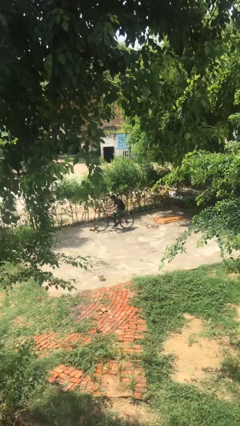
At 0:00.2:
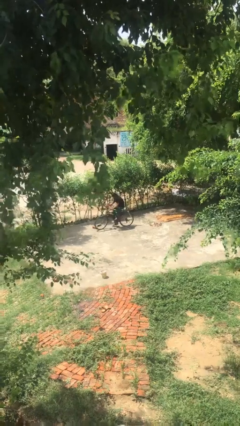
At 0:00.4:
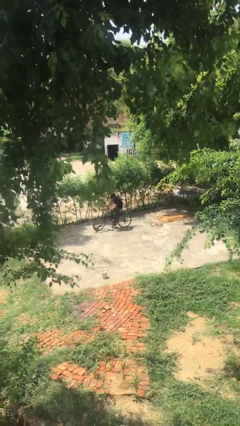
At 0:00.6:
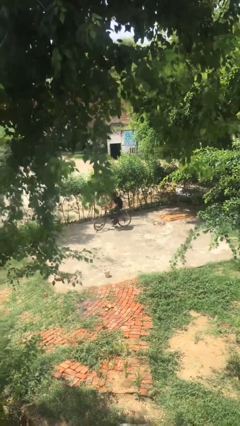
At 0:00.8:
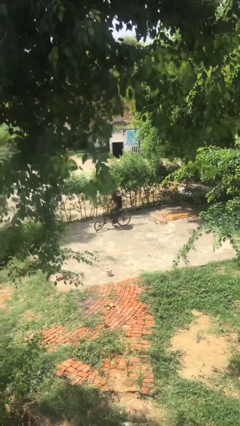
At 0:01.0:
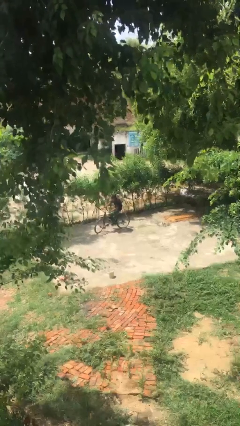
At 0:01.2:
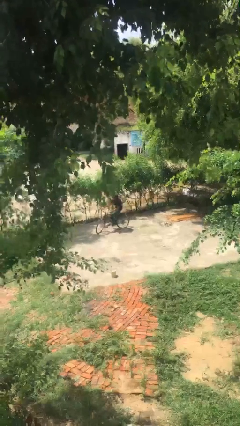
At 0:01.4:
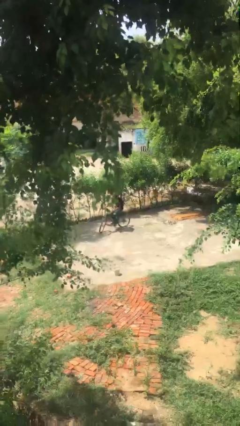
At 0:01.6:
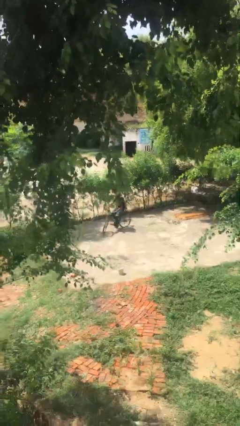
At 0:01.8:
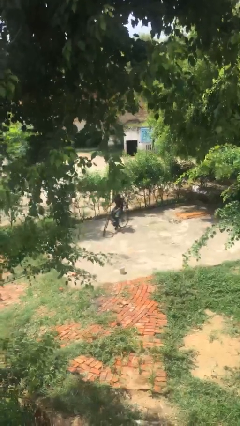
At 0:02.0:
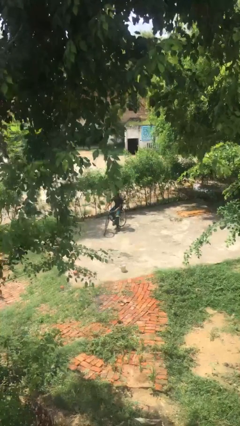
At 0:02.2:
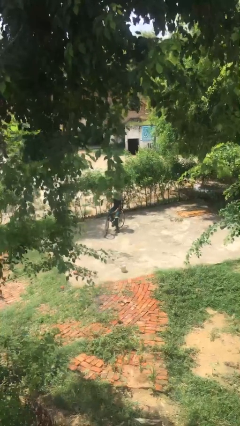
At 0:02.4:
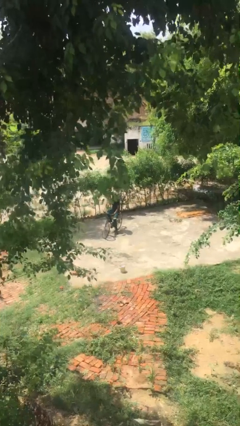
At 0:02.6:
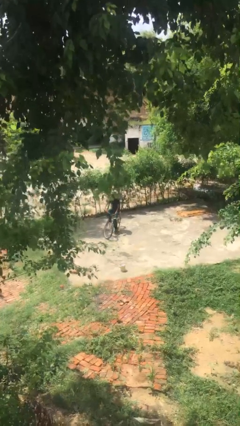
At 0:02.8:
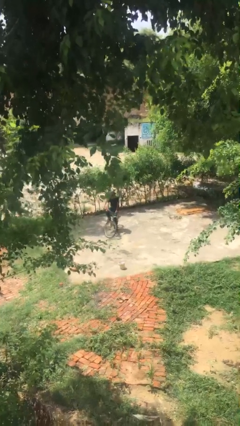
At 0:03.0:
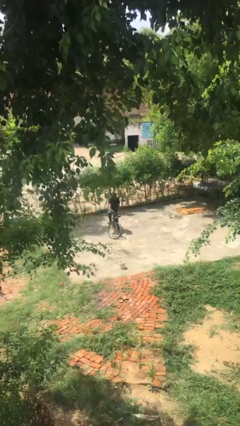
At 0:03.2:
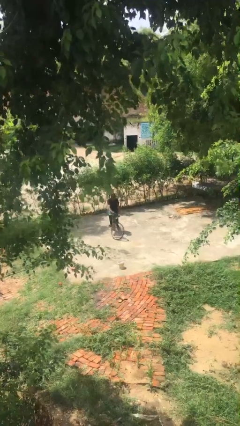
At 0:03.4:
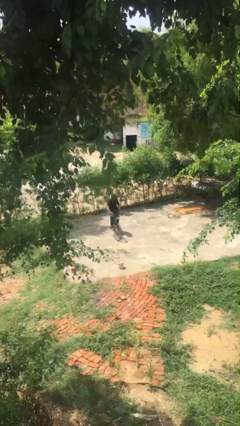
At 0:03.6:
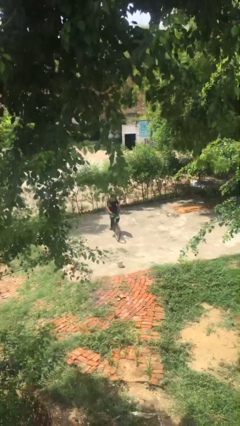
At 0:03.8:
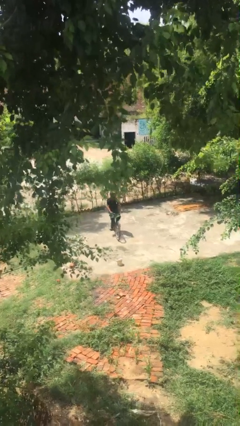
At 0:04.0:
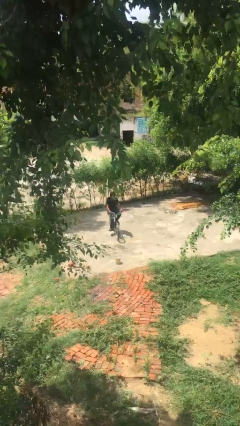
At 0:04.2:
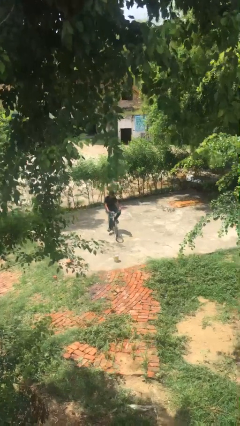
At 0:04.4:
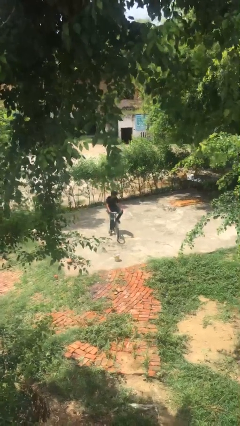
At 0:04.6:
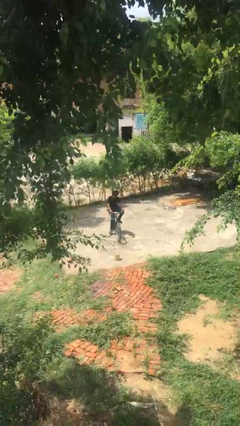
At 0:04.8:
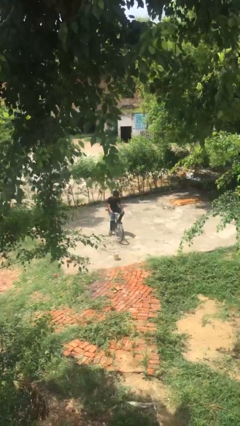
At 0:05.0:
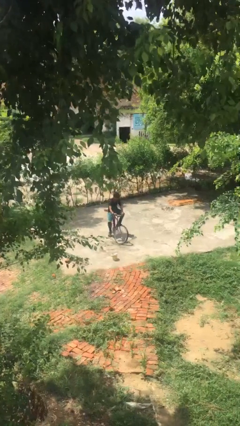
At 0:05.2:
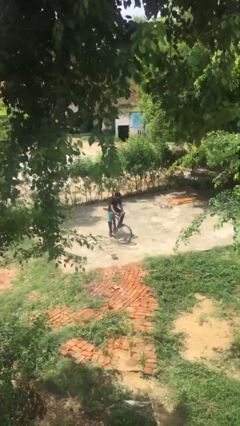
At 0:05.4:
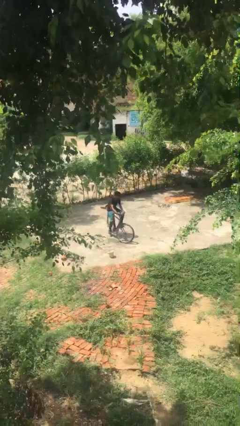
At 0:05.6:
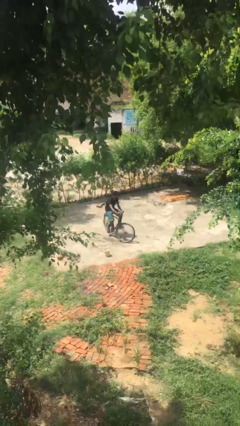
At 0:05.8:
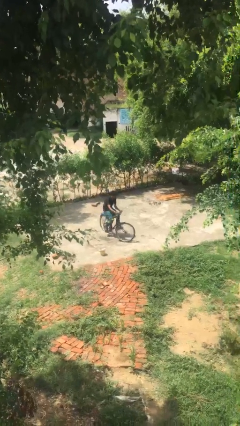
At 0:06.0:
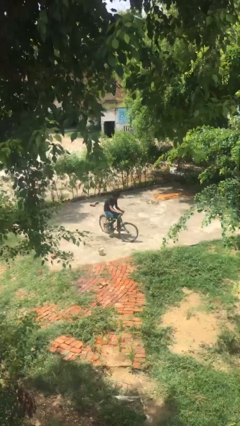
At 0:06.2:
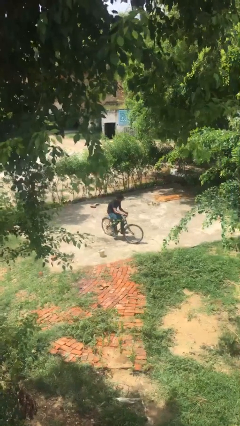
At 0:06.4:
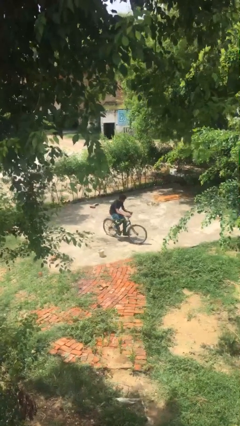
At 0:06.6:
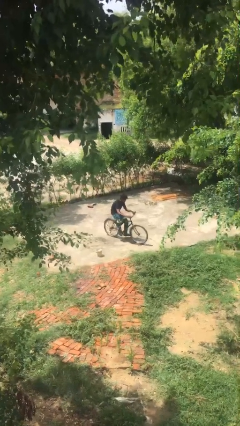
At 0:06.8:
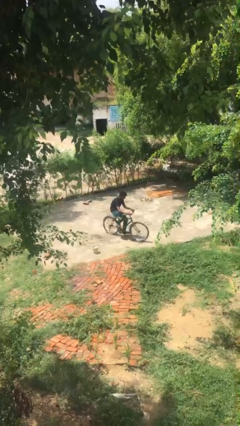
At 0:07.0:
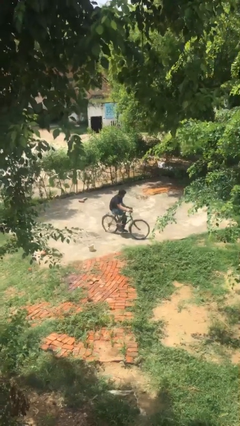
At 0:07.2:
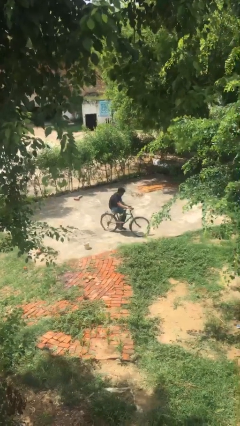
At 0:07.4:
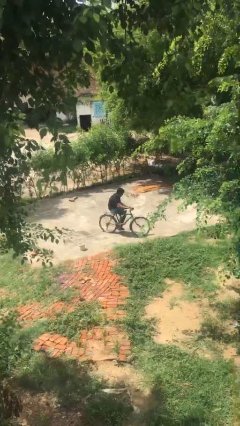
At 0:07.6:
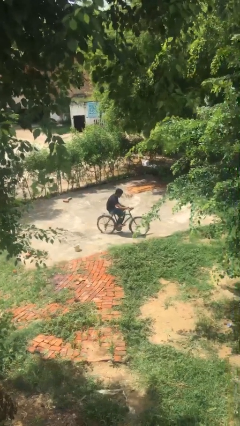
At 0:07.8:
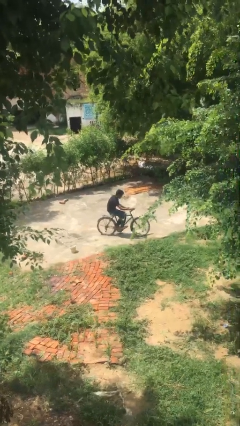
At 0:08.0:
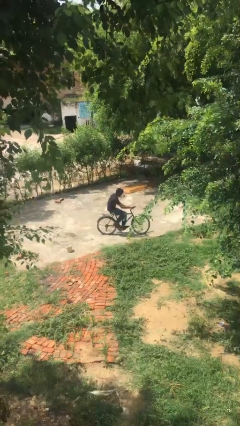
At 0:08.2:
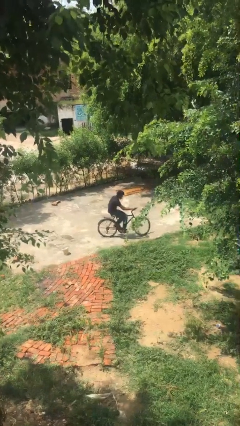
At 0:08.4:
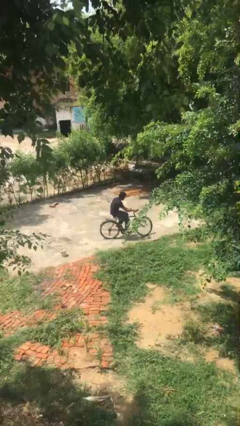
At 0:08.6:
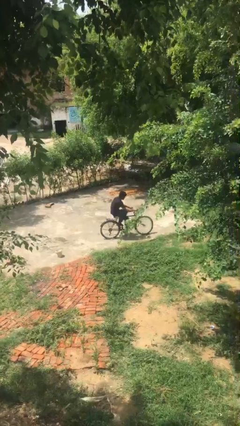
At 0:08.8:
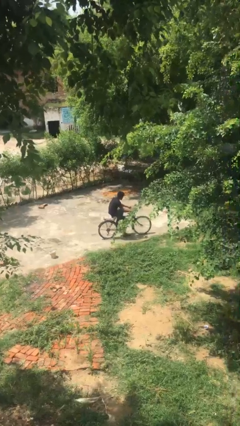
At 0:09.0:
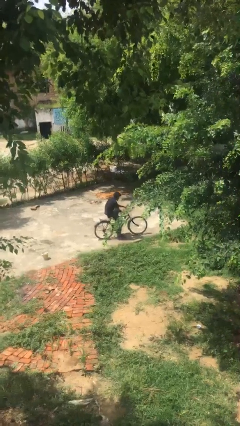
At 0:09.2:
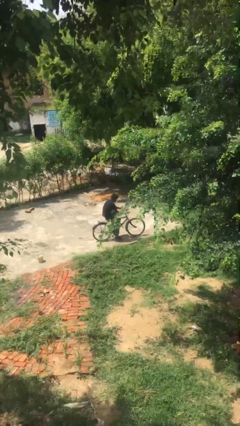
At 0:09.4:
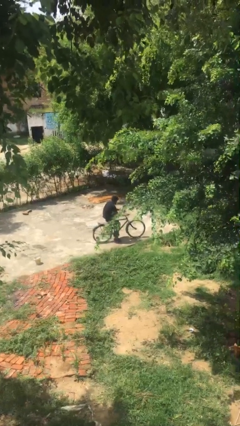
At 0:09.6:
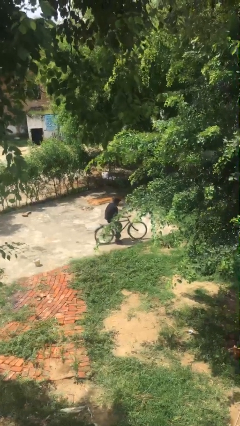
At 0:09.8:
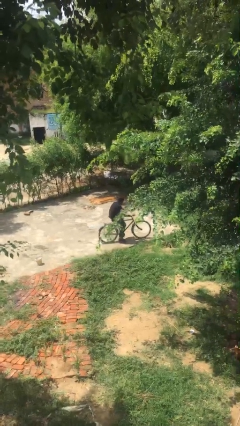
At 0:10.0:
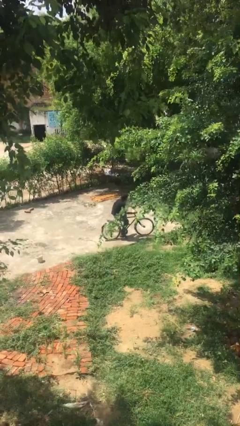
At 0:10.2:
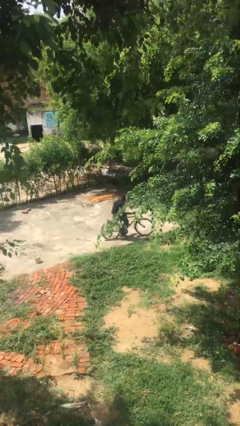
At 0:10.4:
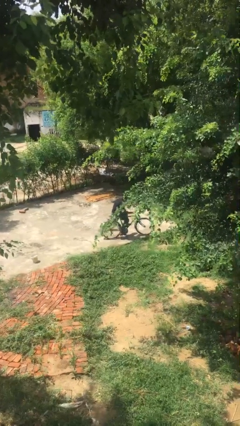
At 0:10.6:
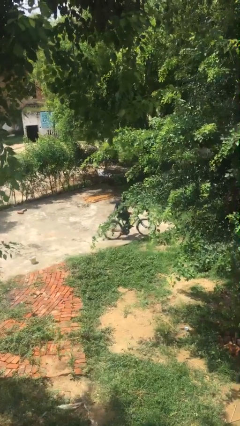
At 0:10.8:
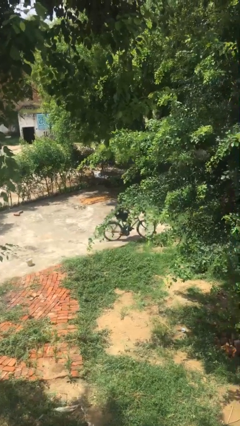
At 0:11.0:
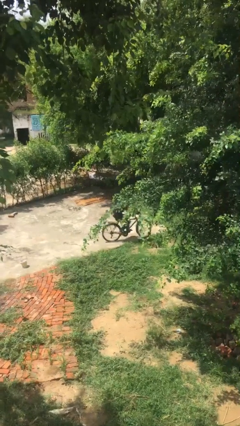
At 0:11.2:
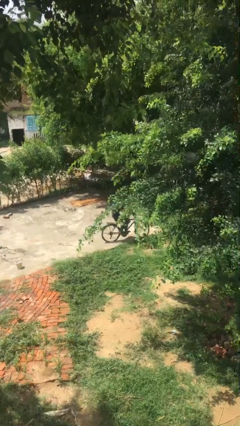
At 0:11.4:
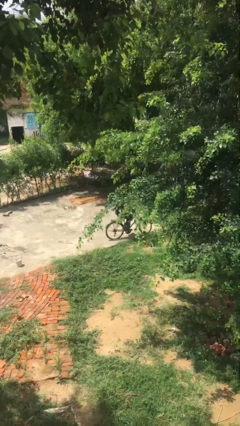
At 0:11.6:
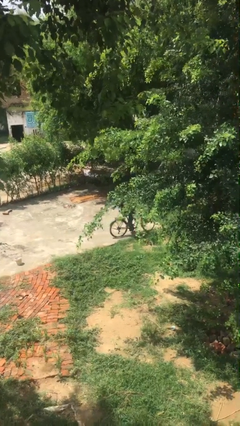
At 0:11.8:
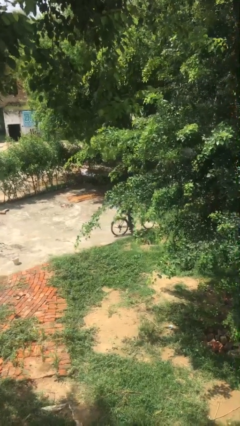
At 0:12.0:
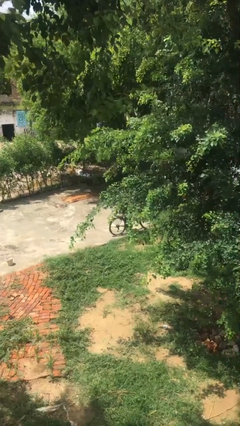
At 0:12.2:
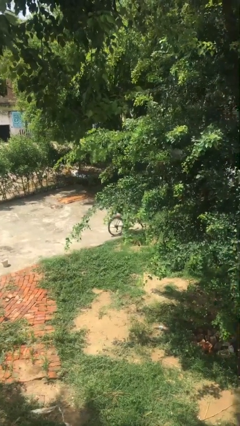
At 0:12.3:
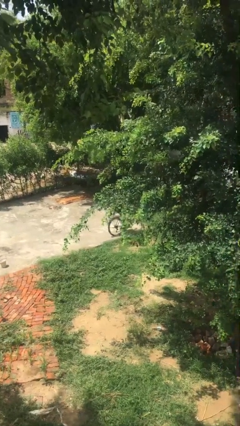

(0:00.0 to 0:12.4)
person rides bicycle

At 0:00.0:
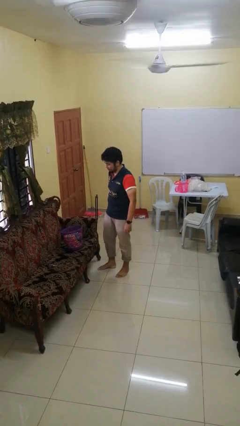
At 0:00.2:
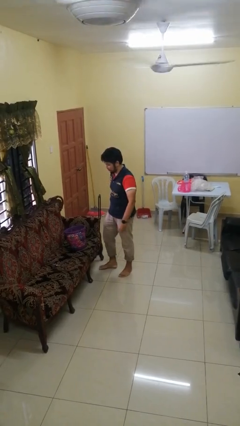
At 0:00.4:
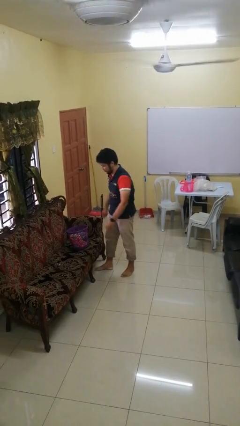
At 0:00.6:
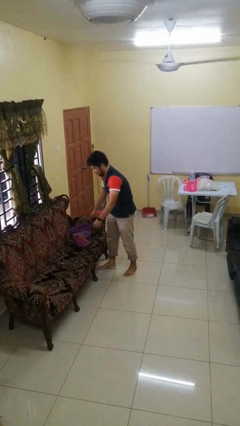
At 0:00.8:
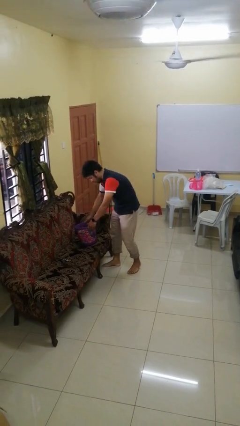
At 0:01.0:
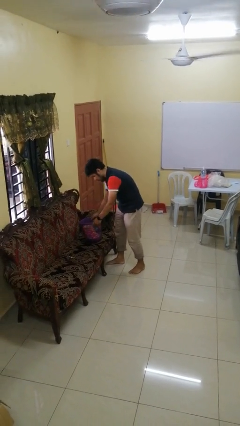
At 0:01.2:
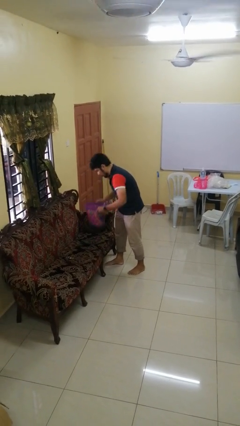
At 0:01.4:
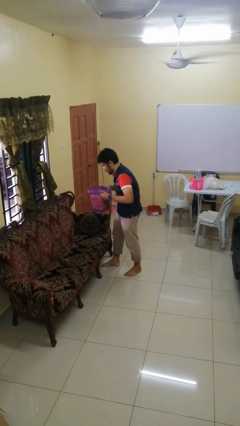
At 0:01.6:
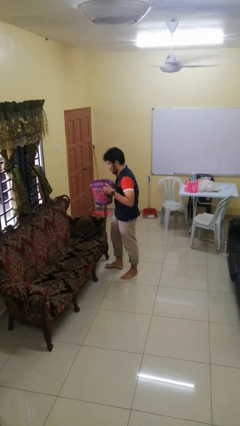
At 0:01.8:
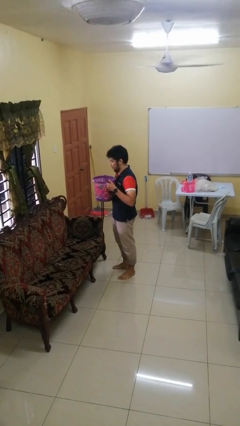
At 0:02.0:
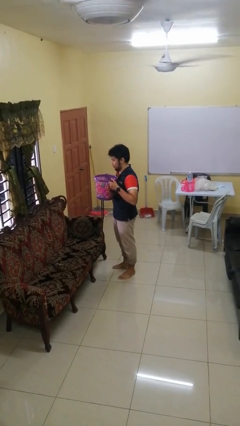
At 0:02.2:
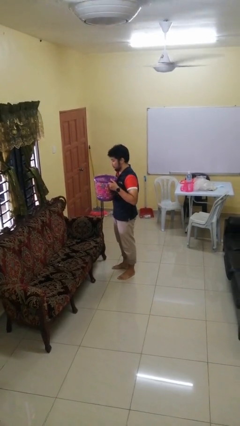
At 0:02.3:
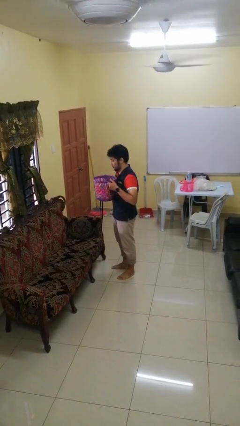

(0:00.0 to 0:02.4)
person picks up object from couch

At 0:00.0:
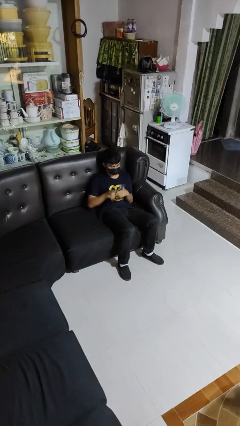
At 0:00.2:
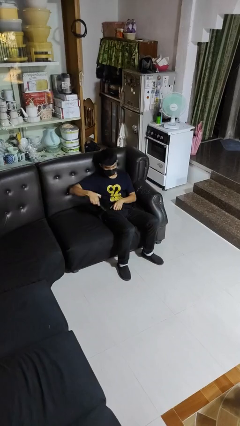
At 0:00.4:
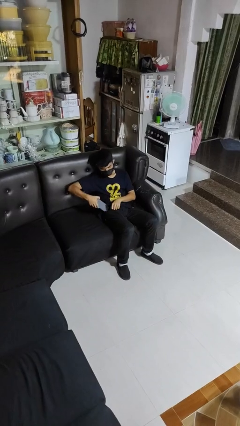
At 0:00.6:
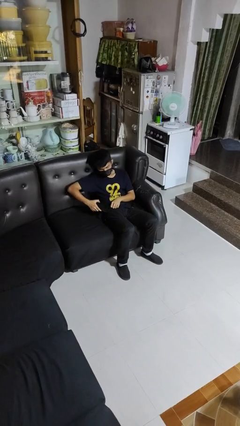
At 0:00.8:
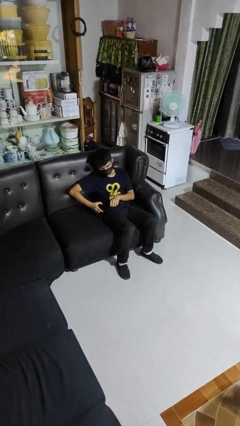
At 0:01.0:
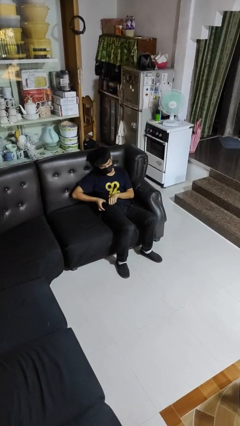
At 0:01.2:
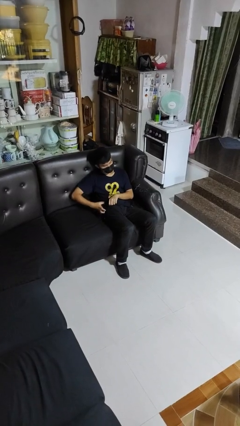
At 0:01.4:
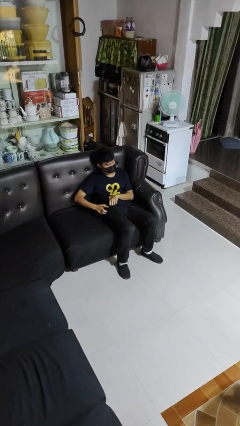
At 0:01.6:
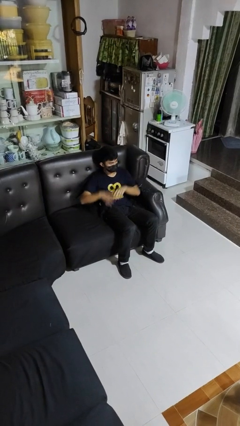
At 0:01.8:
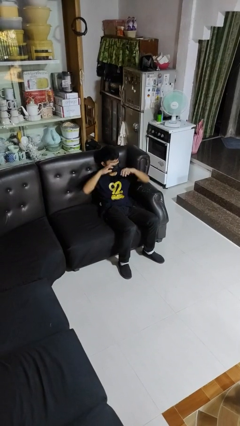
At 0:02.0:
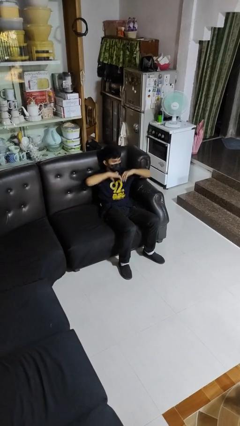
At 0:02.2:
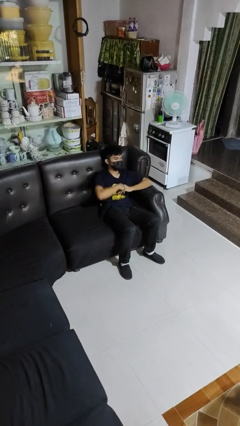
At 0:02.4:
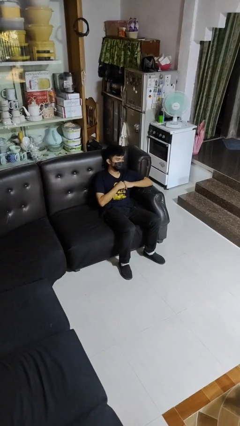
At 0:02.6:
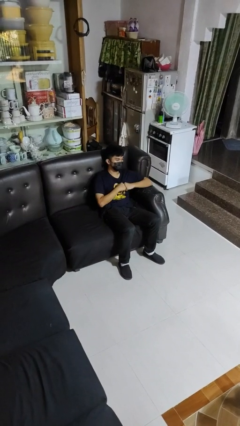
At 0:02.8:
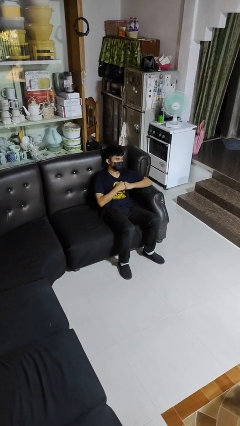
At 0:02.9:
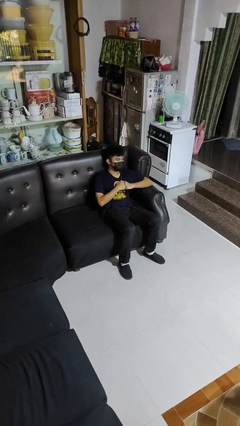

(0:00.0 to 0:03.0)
person puts phone into pocket

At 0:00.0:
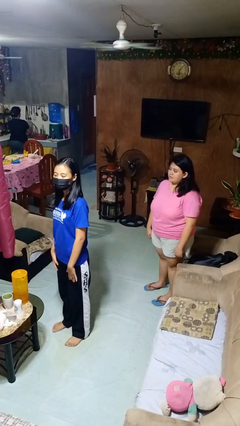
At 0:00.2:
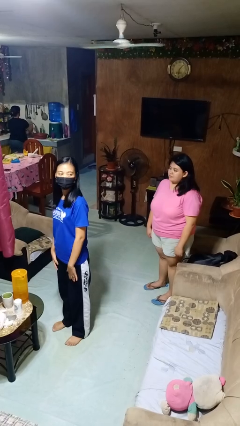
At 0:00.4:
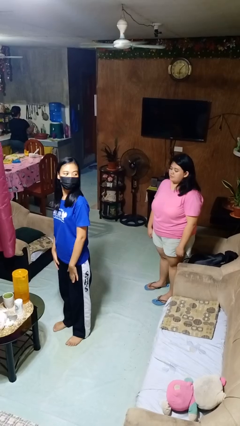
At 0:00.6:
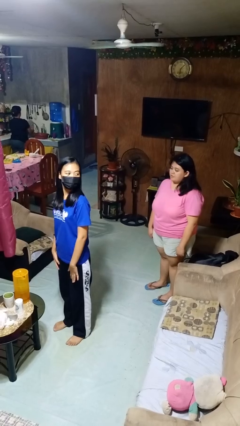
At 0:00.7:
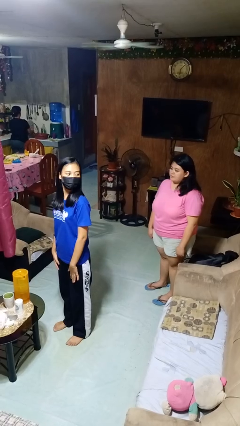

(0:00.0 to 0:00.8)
person looks over shoulder
